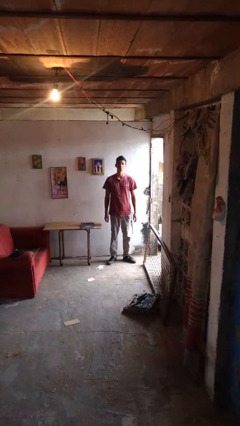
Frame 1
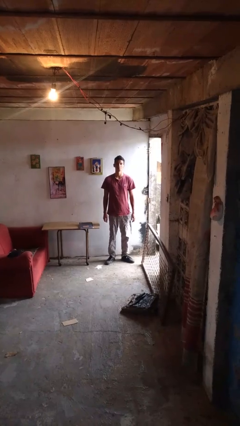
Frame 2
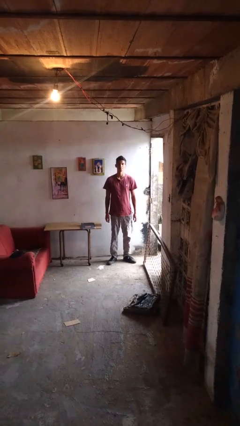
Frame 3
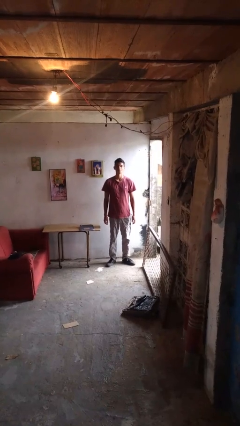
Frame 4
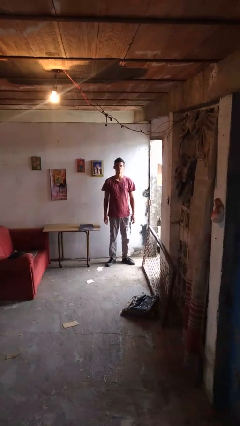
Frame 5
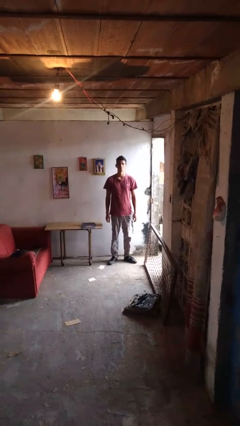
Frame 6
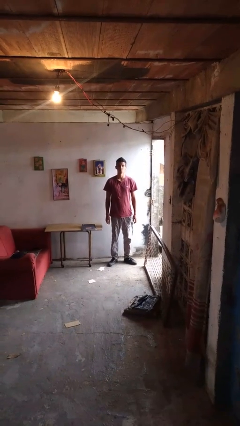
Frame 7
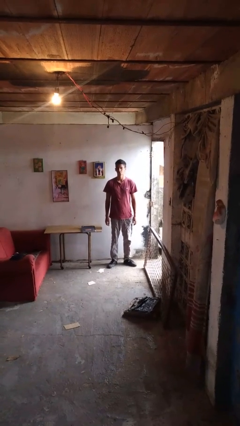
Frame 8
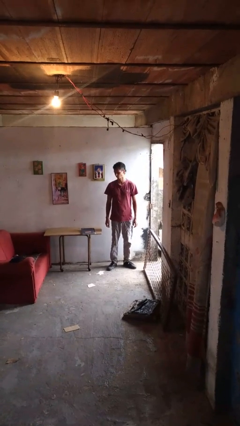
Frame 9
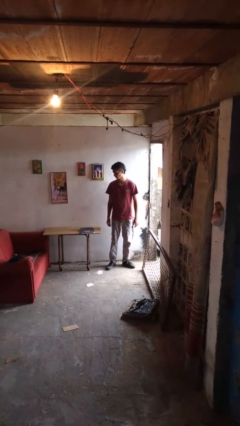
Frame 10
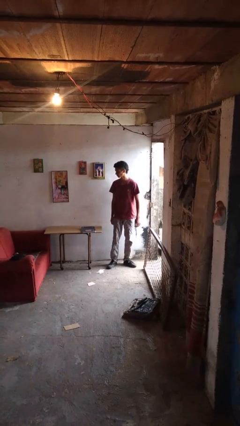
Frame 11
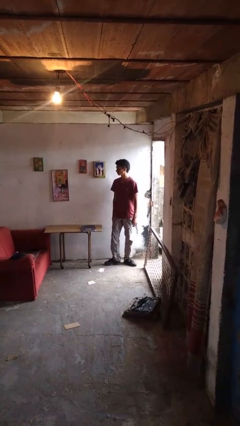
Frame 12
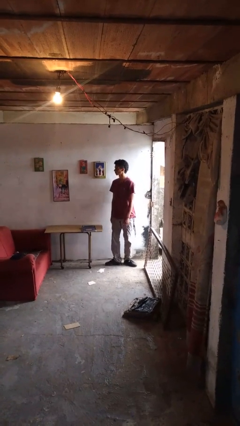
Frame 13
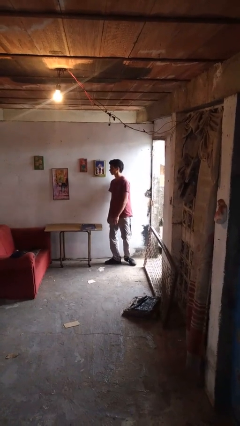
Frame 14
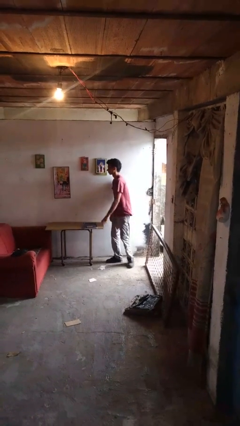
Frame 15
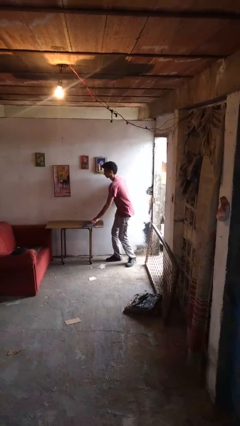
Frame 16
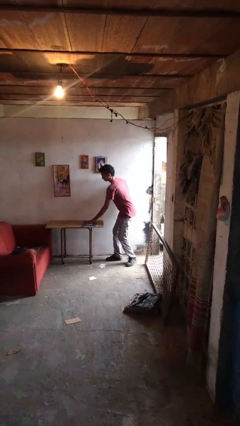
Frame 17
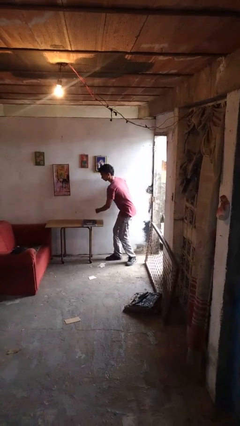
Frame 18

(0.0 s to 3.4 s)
person picks up object from floor

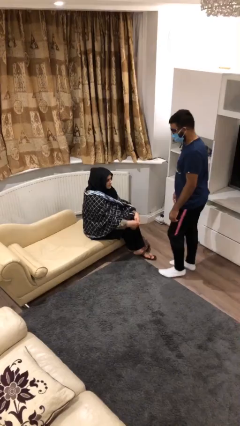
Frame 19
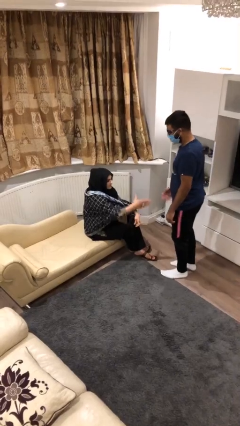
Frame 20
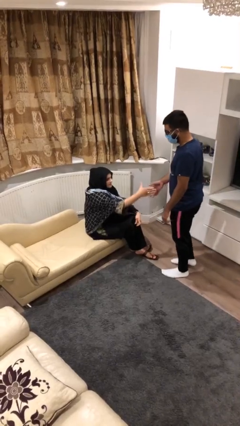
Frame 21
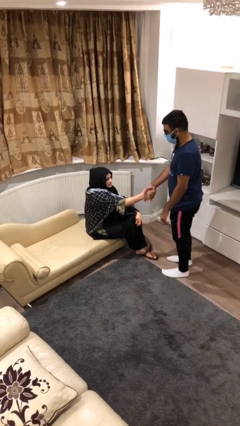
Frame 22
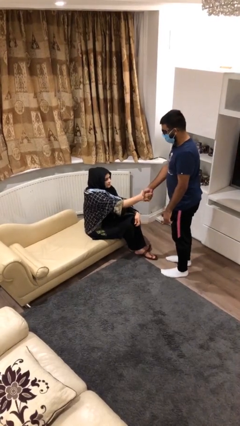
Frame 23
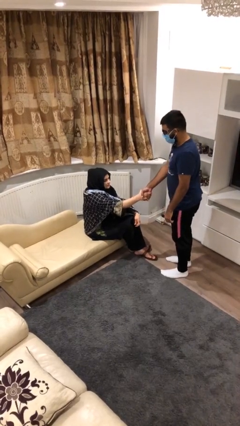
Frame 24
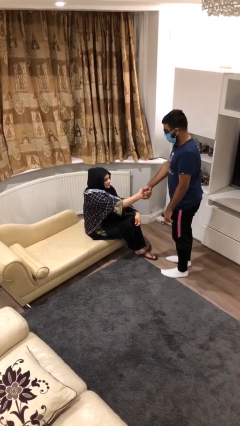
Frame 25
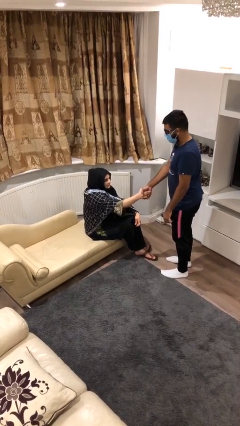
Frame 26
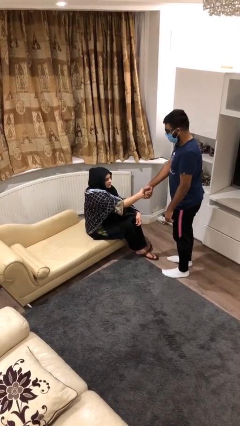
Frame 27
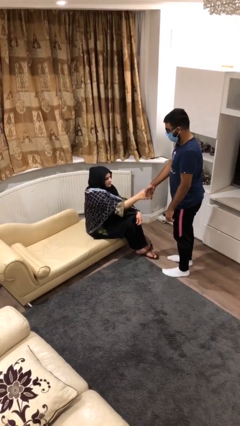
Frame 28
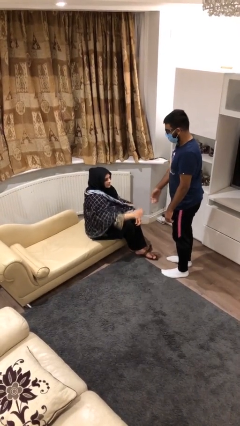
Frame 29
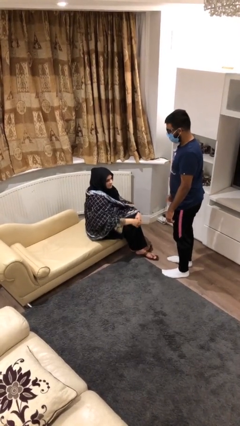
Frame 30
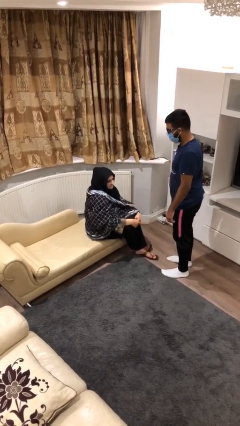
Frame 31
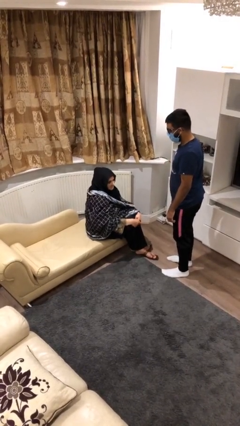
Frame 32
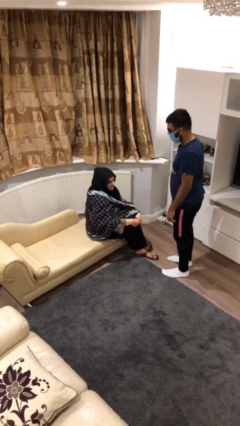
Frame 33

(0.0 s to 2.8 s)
person shakes hand

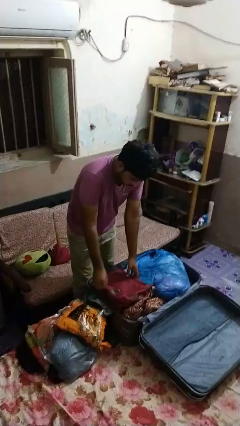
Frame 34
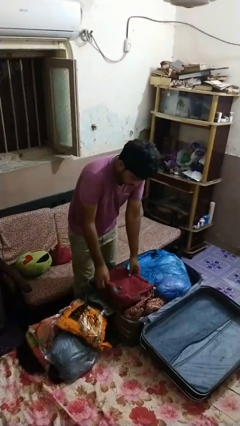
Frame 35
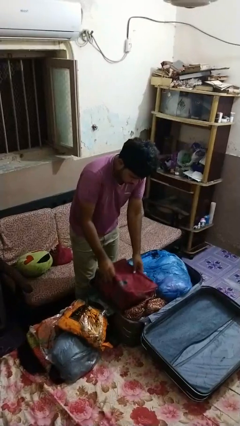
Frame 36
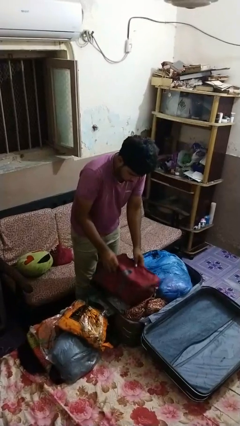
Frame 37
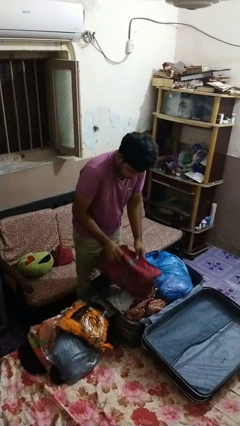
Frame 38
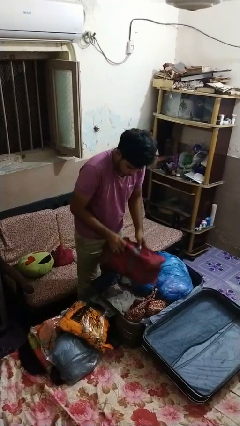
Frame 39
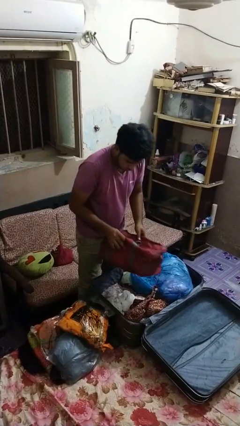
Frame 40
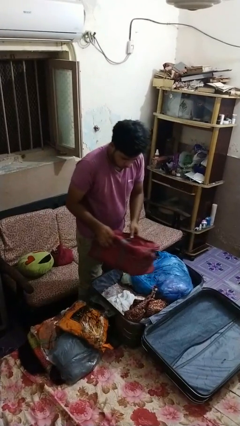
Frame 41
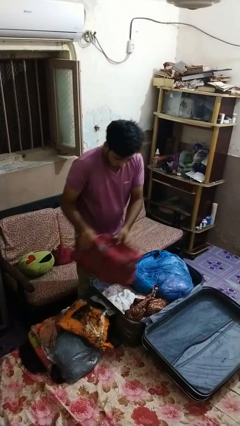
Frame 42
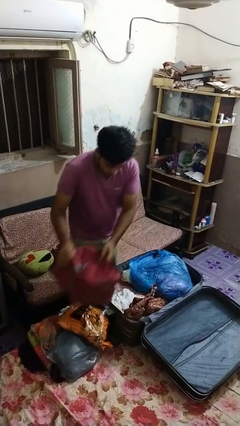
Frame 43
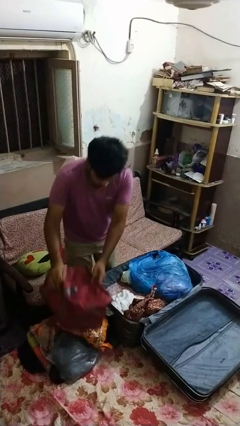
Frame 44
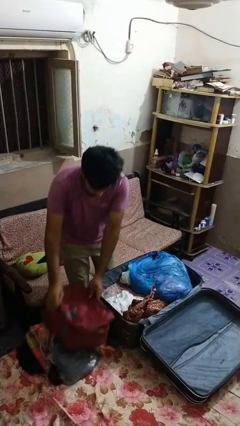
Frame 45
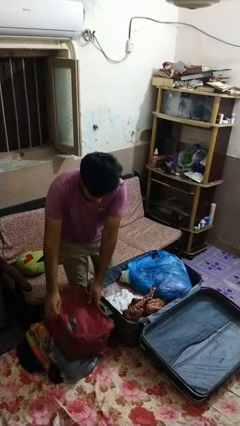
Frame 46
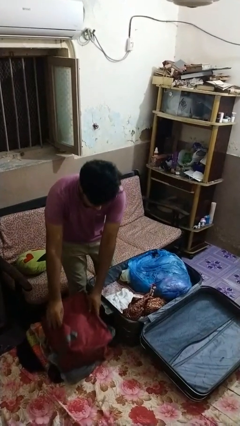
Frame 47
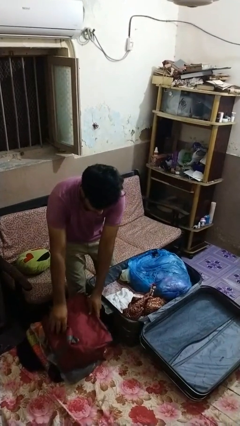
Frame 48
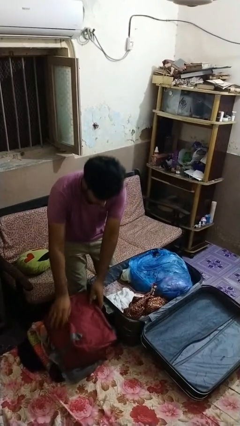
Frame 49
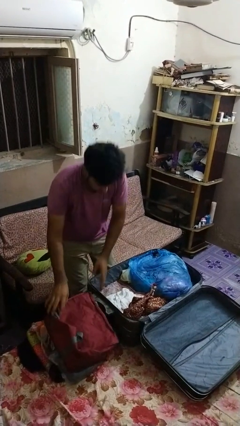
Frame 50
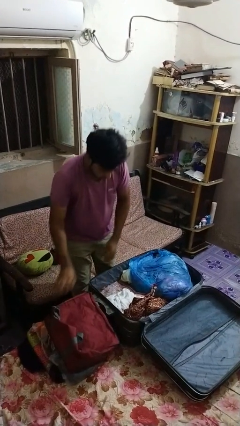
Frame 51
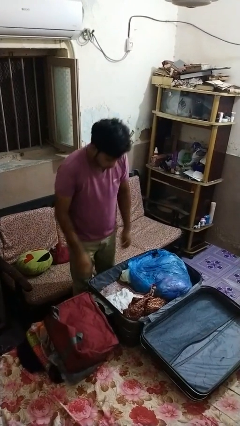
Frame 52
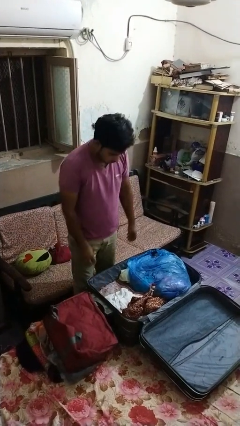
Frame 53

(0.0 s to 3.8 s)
person unloads clothes from suitcase

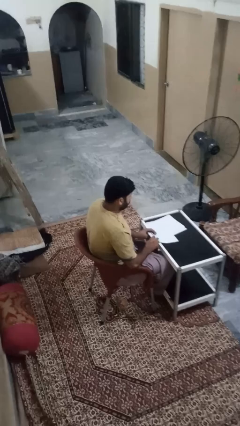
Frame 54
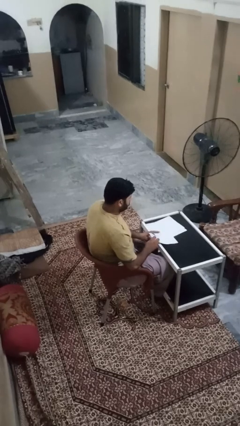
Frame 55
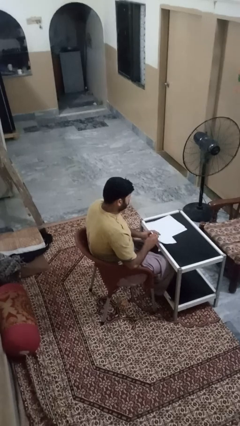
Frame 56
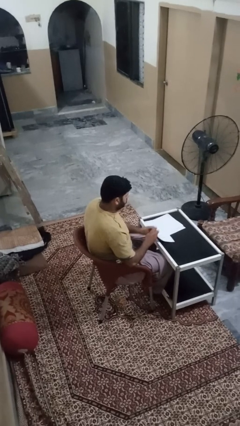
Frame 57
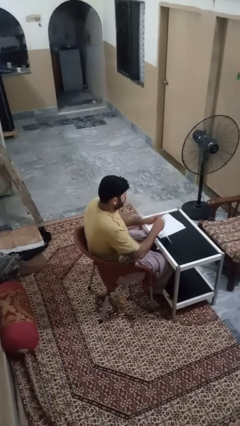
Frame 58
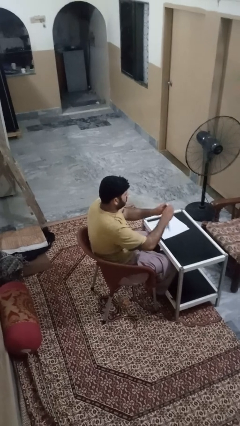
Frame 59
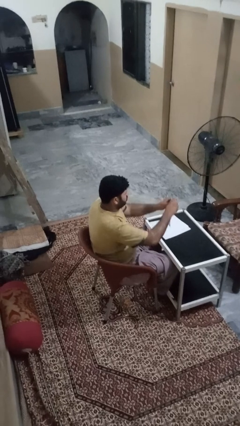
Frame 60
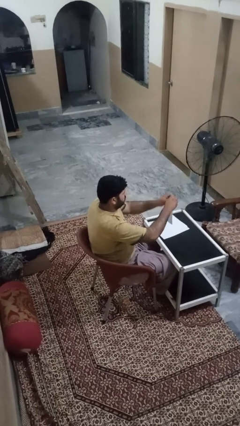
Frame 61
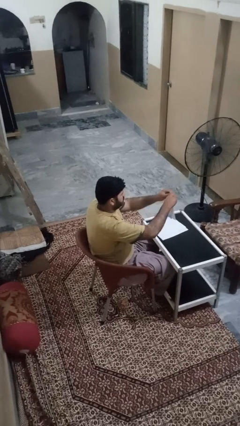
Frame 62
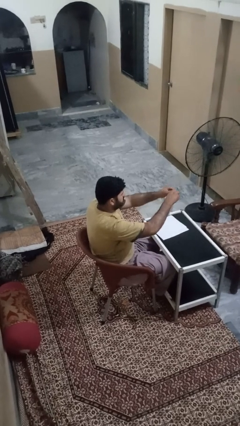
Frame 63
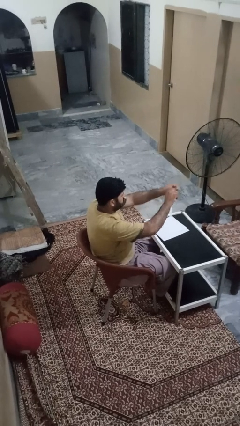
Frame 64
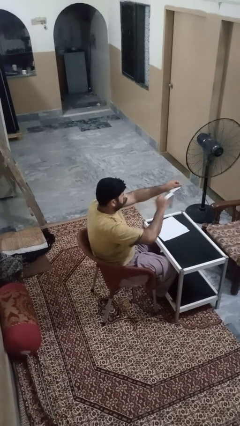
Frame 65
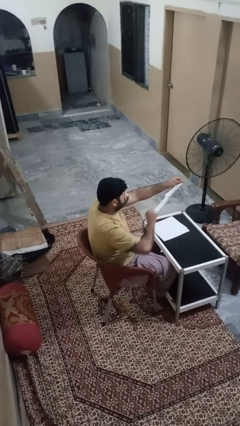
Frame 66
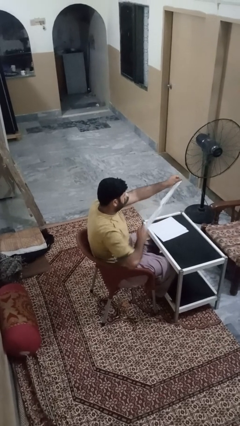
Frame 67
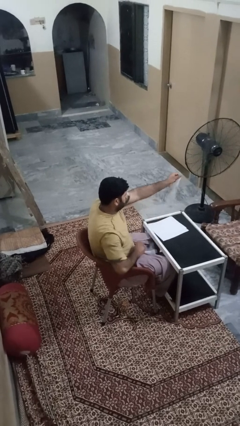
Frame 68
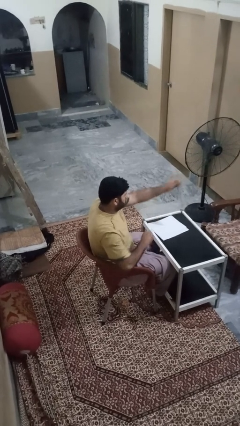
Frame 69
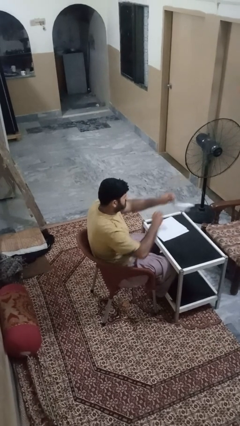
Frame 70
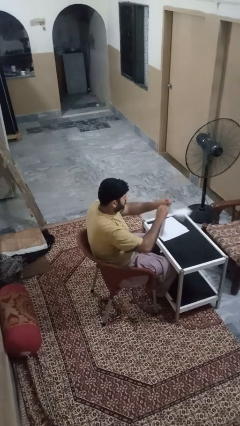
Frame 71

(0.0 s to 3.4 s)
person tears paper

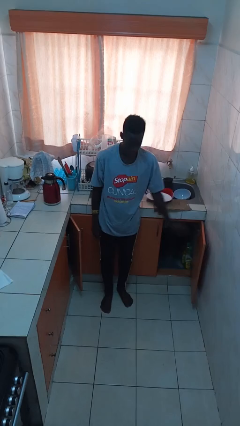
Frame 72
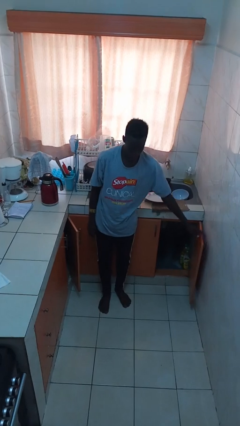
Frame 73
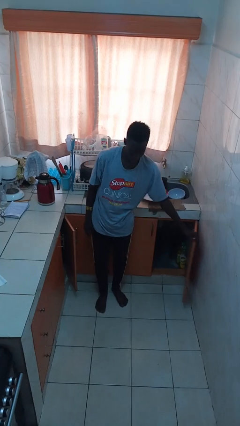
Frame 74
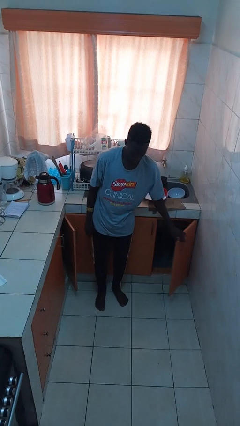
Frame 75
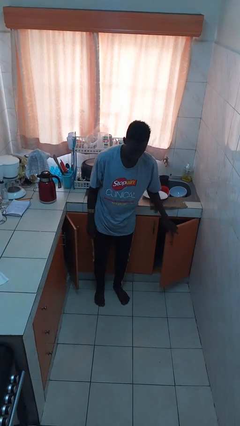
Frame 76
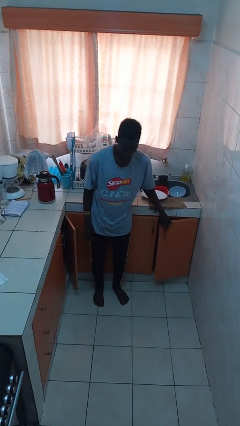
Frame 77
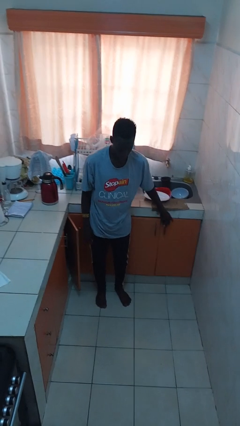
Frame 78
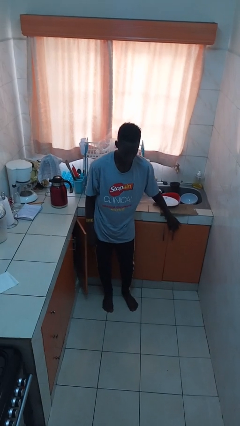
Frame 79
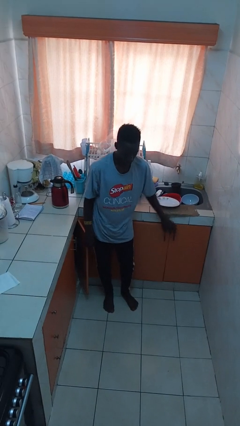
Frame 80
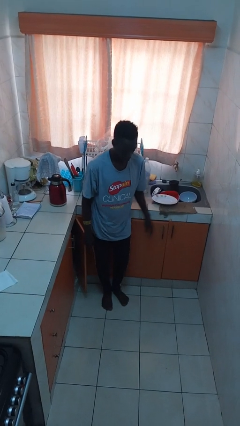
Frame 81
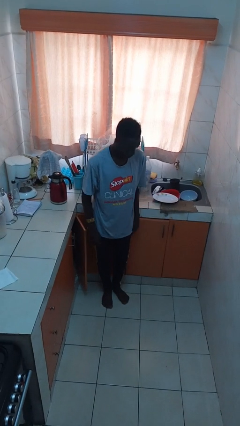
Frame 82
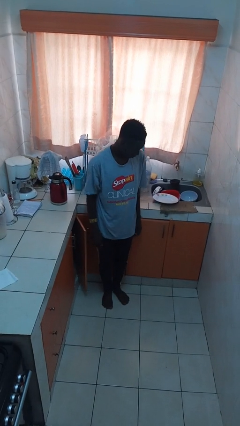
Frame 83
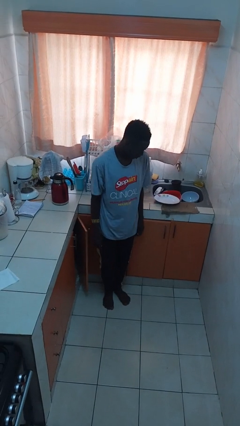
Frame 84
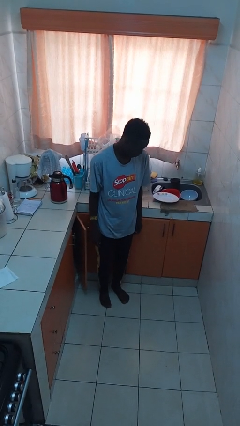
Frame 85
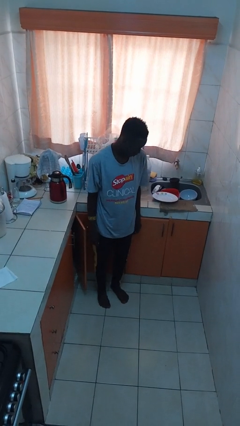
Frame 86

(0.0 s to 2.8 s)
person closes cabinet

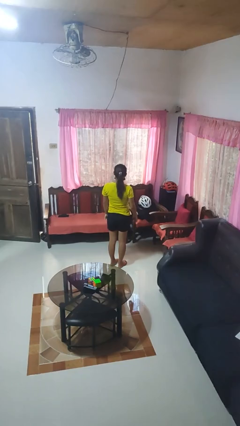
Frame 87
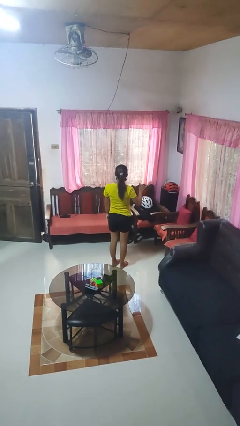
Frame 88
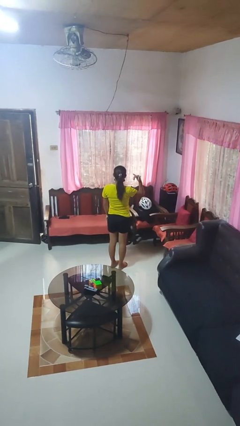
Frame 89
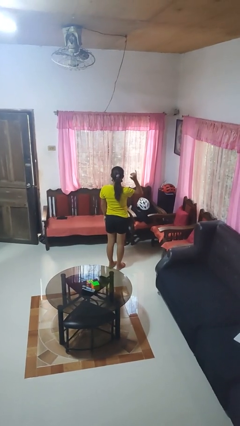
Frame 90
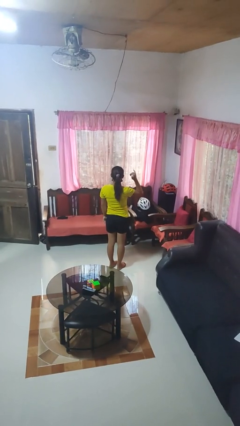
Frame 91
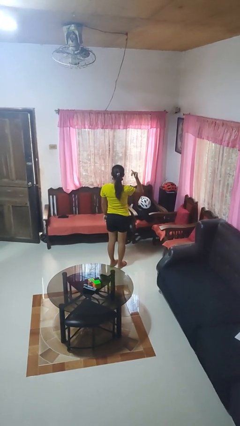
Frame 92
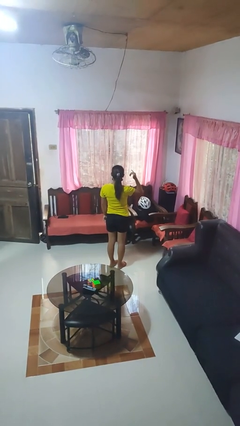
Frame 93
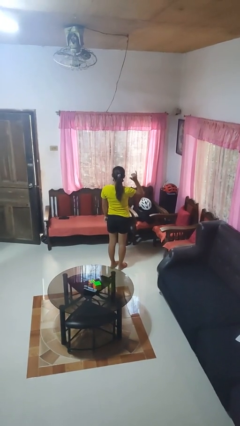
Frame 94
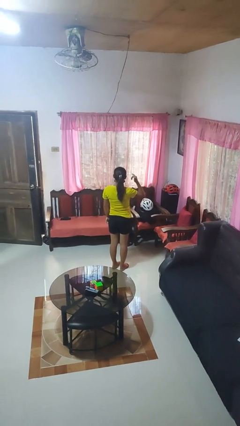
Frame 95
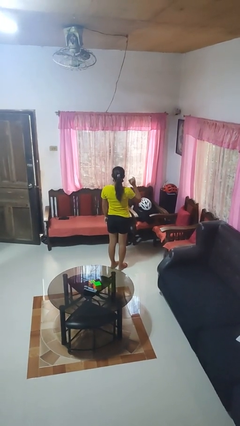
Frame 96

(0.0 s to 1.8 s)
person gestures hang loose
